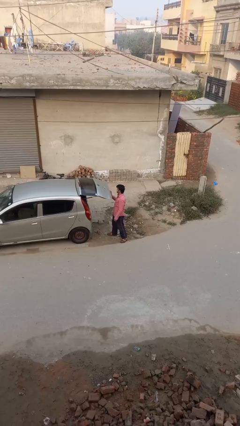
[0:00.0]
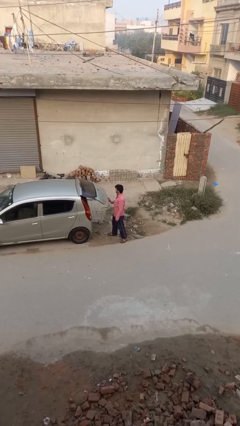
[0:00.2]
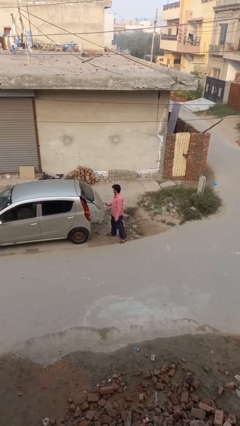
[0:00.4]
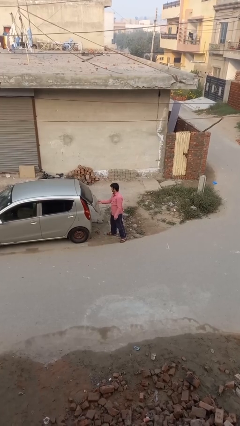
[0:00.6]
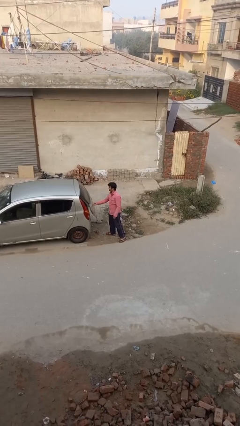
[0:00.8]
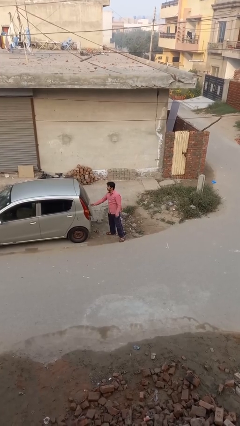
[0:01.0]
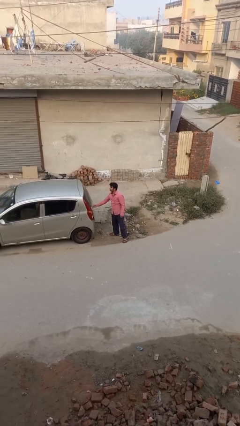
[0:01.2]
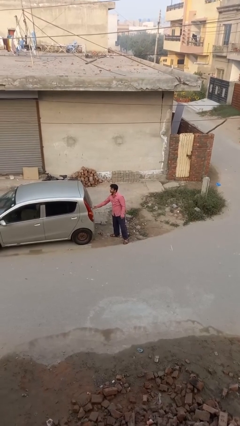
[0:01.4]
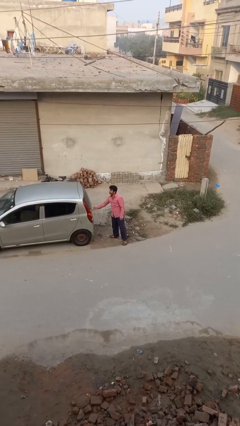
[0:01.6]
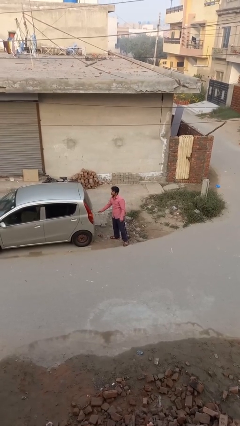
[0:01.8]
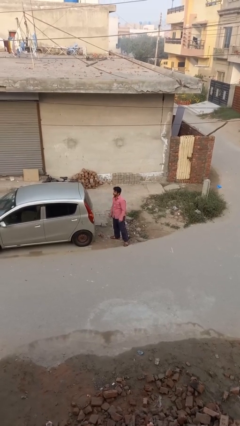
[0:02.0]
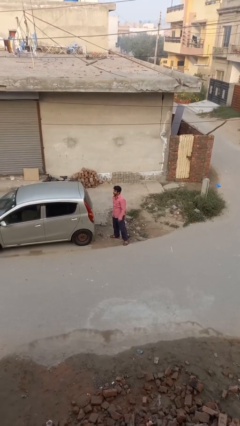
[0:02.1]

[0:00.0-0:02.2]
person closes car trunk

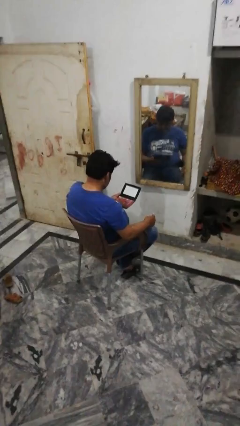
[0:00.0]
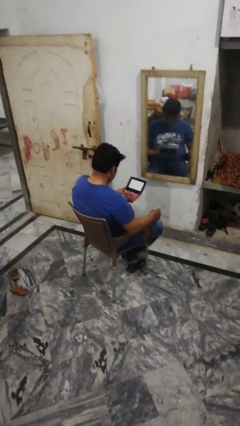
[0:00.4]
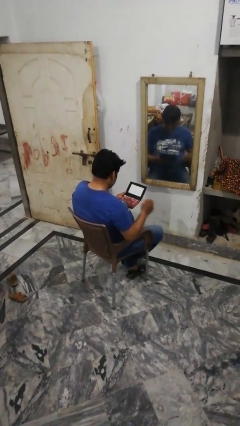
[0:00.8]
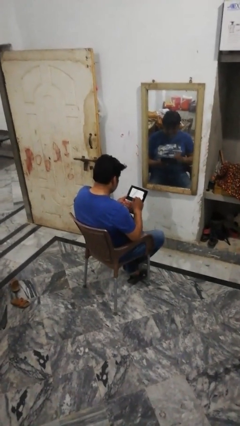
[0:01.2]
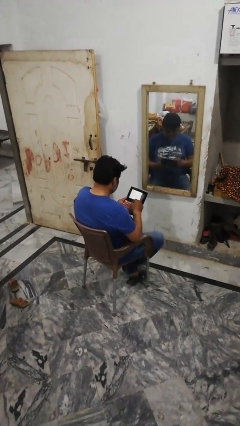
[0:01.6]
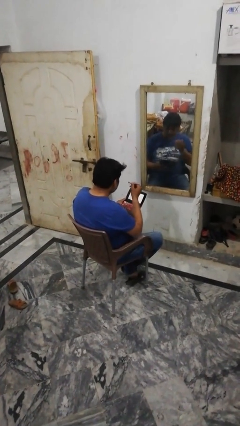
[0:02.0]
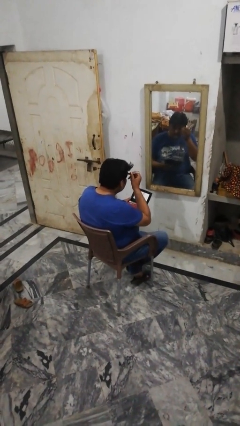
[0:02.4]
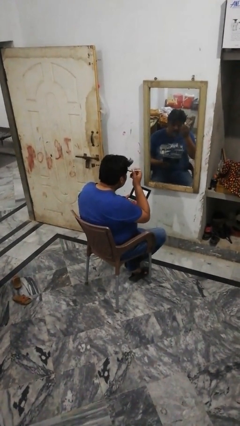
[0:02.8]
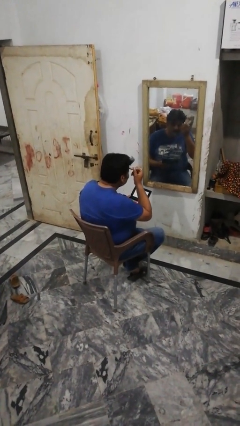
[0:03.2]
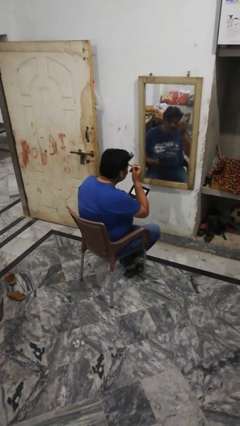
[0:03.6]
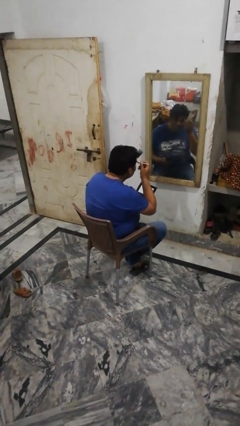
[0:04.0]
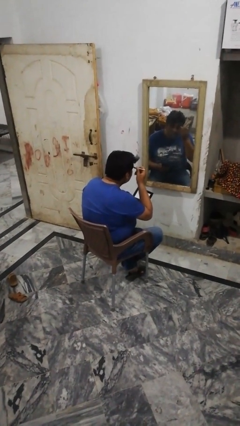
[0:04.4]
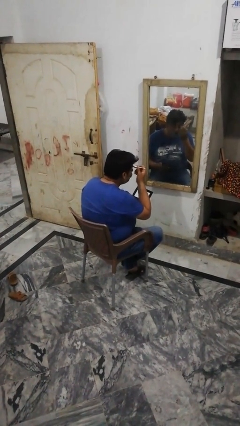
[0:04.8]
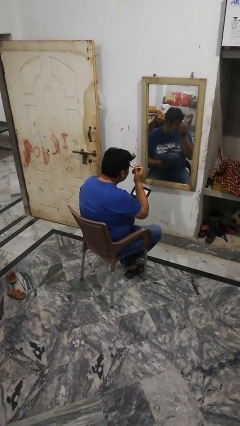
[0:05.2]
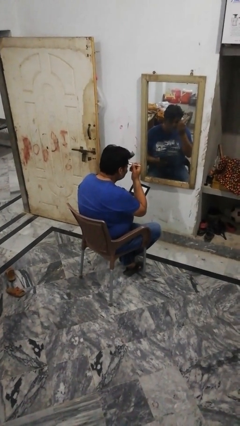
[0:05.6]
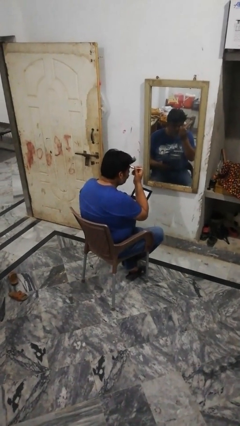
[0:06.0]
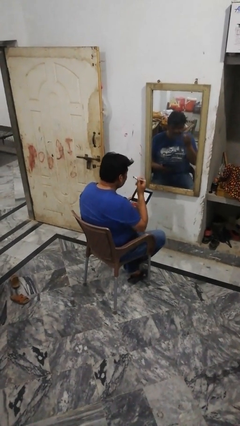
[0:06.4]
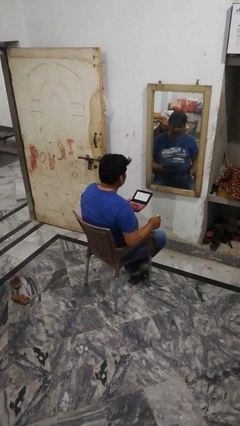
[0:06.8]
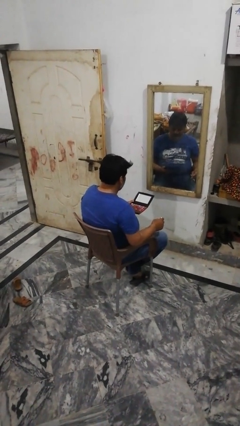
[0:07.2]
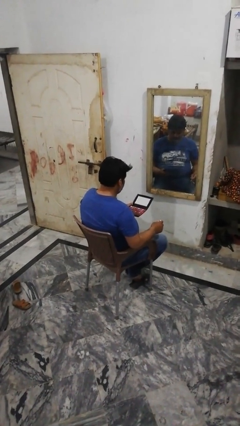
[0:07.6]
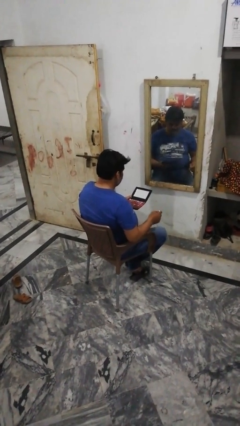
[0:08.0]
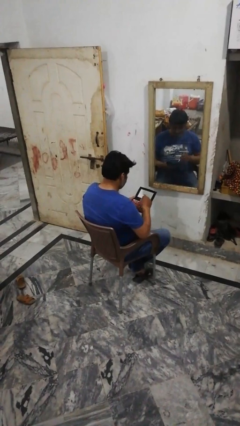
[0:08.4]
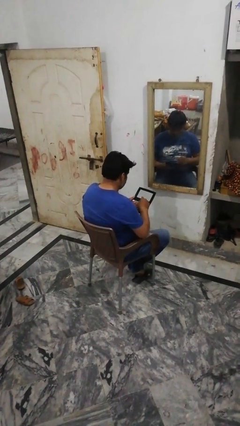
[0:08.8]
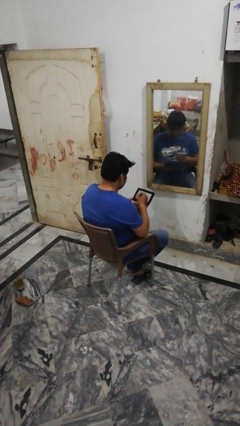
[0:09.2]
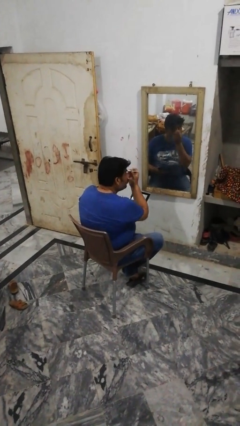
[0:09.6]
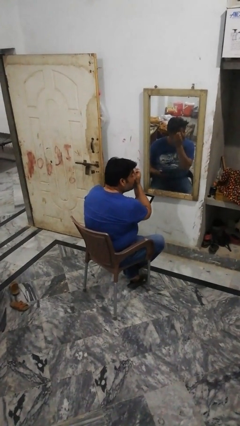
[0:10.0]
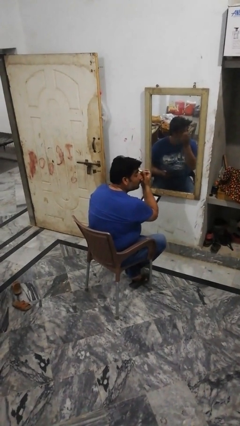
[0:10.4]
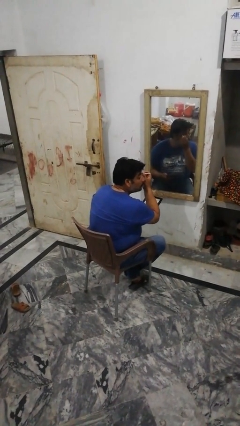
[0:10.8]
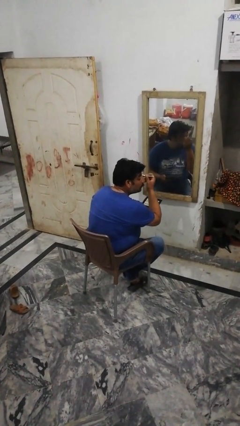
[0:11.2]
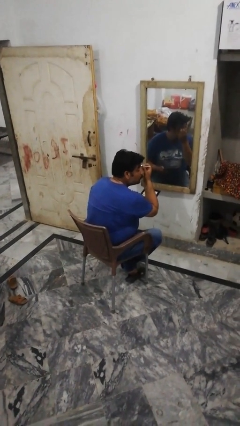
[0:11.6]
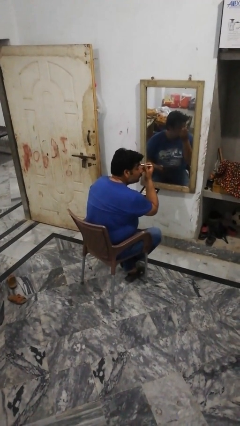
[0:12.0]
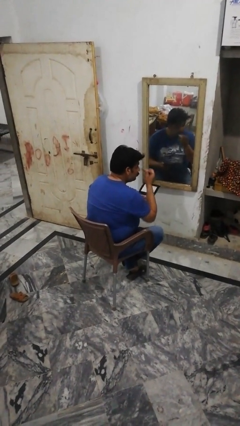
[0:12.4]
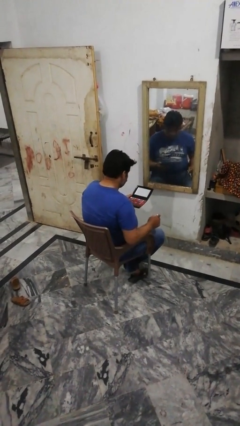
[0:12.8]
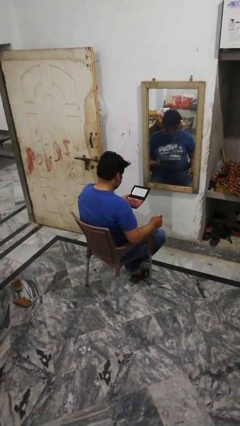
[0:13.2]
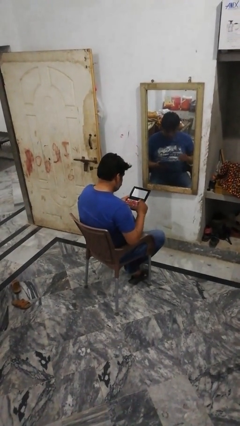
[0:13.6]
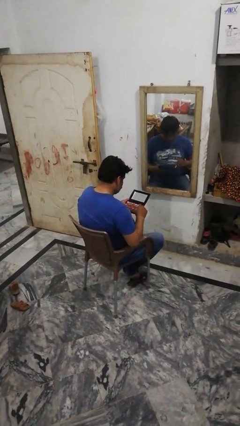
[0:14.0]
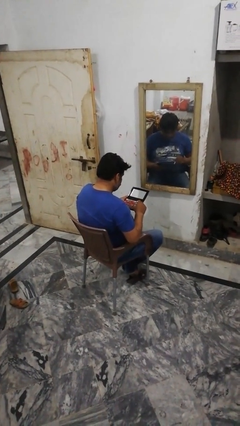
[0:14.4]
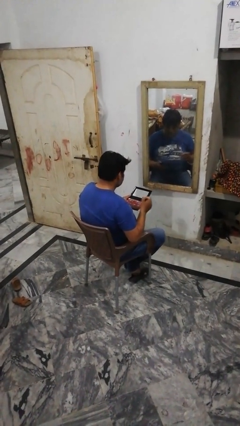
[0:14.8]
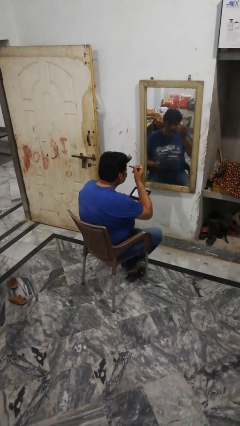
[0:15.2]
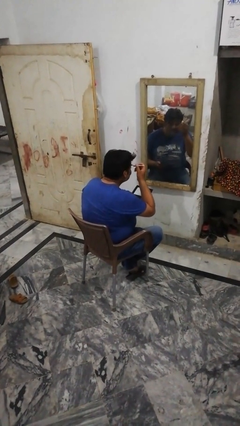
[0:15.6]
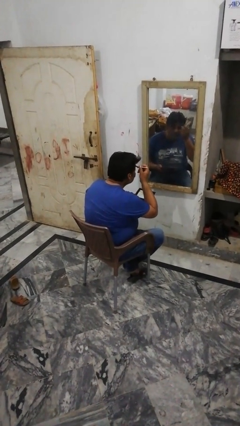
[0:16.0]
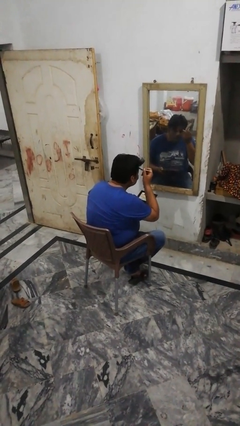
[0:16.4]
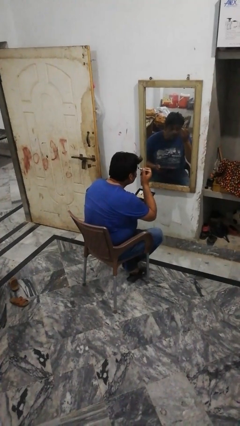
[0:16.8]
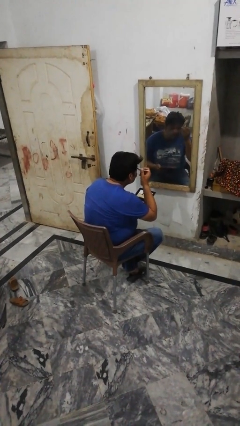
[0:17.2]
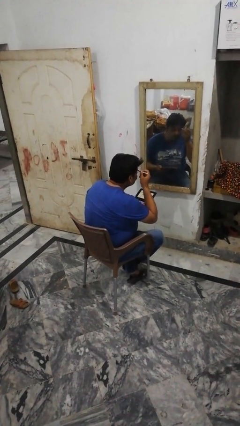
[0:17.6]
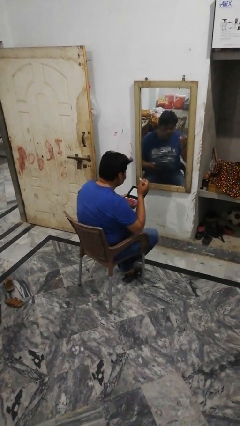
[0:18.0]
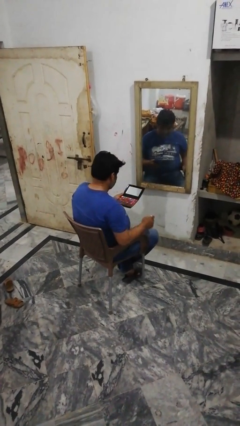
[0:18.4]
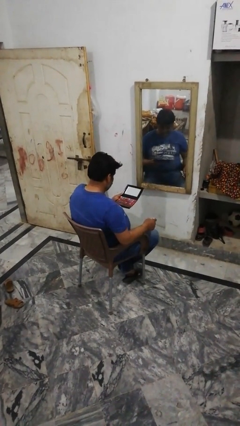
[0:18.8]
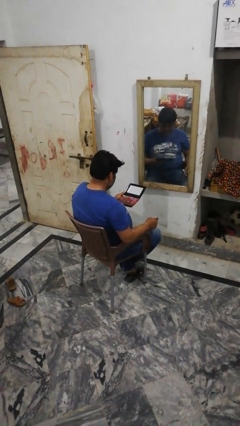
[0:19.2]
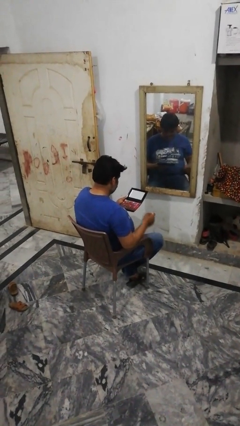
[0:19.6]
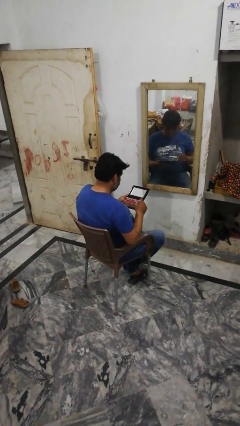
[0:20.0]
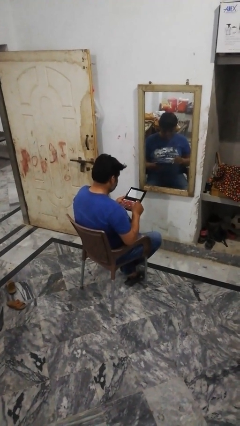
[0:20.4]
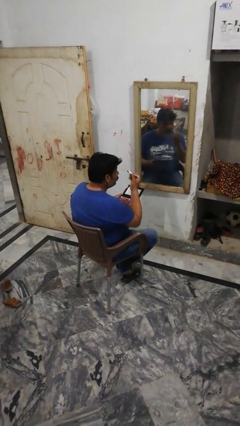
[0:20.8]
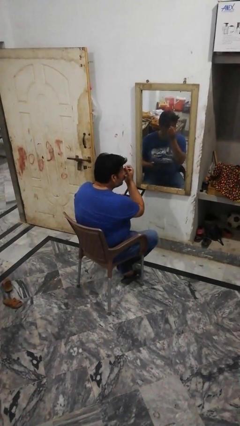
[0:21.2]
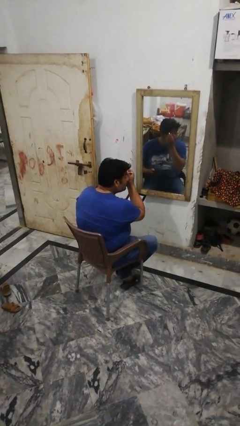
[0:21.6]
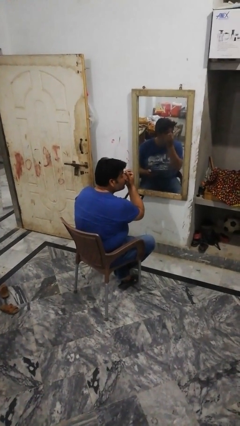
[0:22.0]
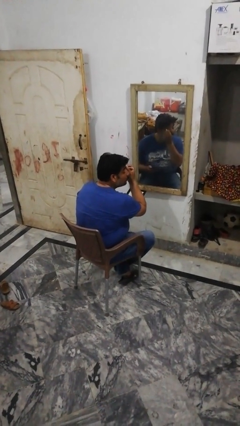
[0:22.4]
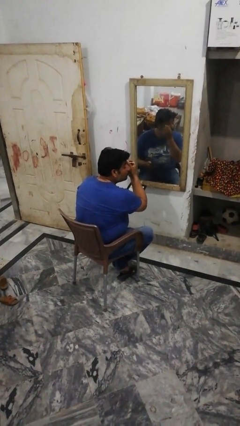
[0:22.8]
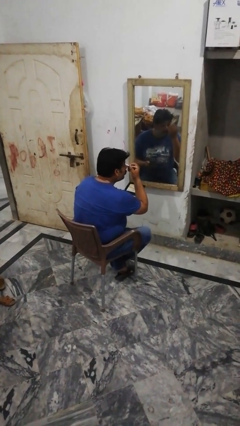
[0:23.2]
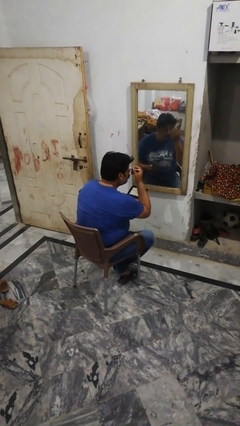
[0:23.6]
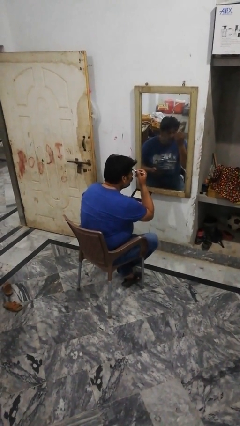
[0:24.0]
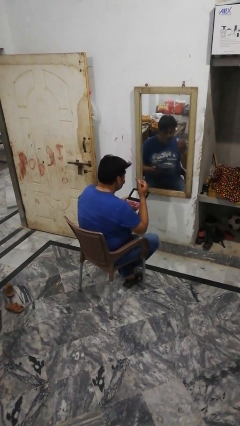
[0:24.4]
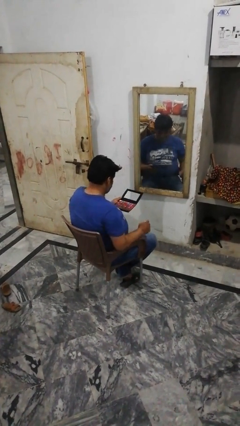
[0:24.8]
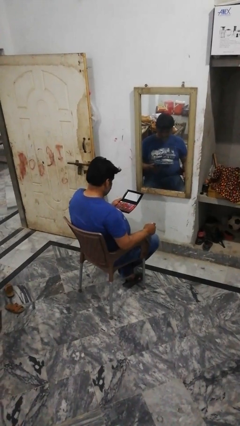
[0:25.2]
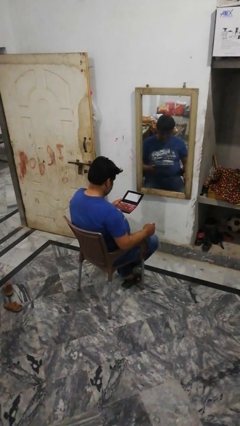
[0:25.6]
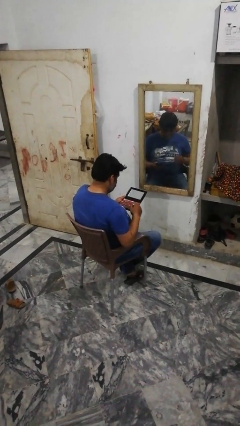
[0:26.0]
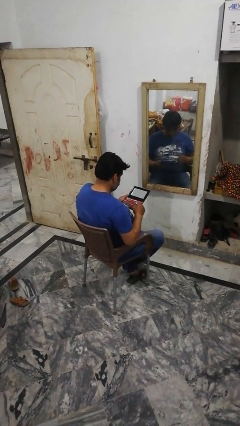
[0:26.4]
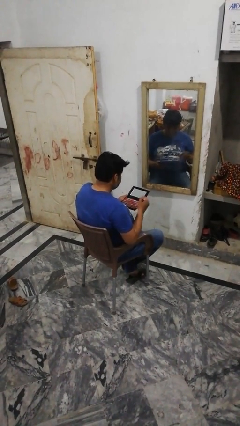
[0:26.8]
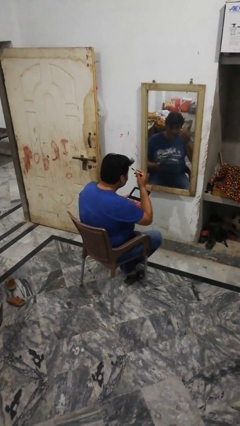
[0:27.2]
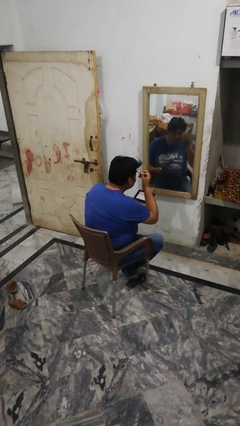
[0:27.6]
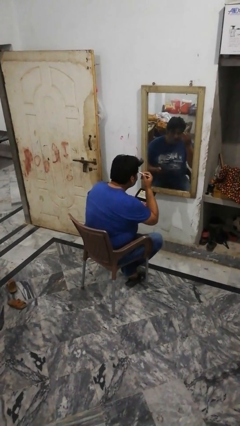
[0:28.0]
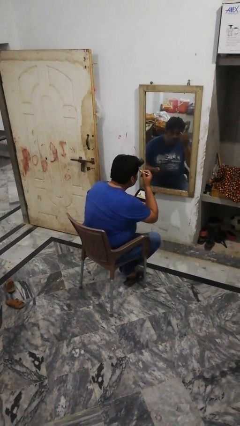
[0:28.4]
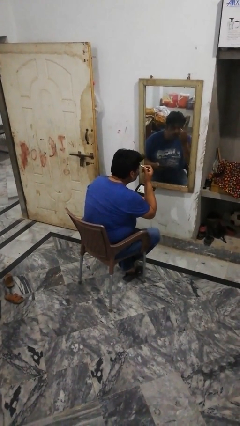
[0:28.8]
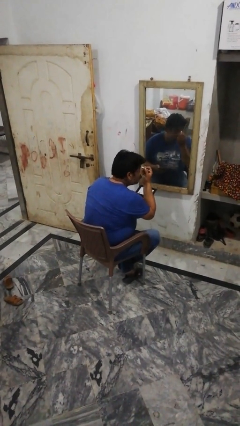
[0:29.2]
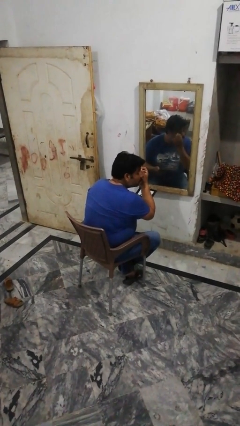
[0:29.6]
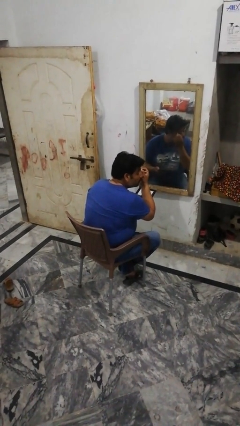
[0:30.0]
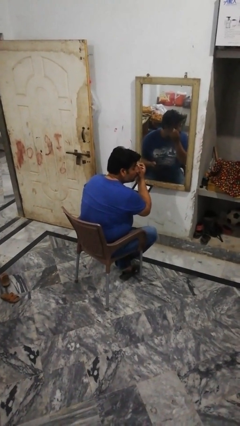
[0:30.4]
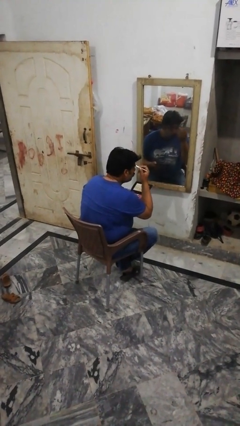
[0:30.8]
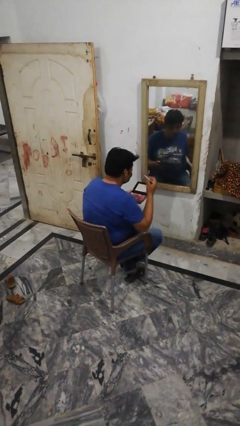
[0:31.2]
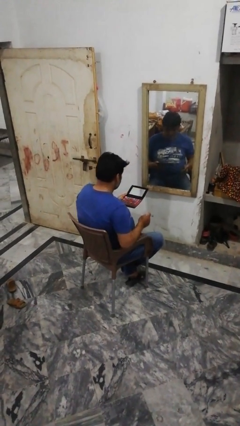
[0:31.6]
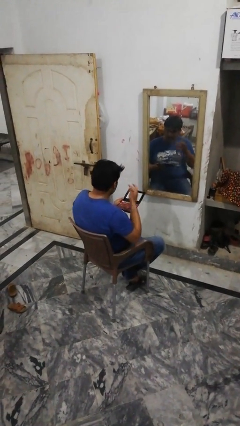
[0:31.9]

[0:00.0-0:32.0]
person applies eye makeup
